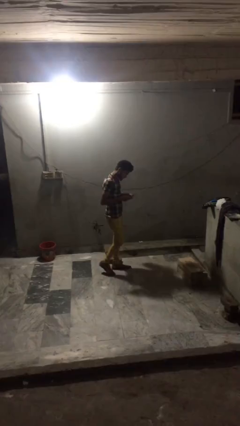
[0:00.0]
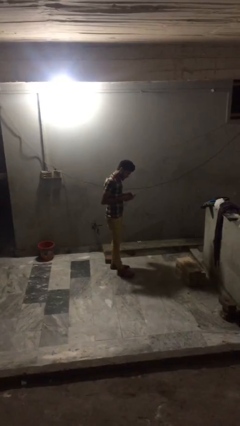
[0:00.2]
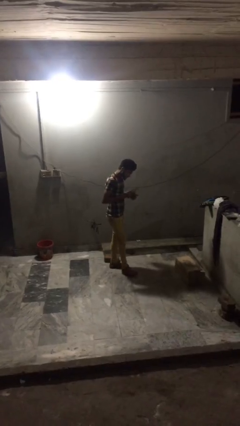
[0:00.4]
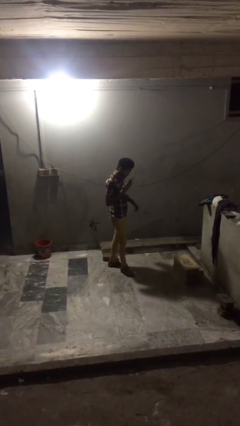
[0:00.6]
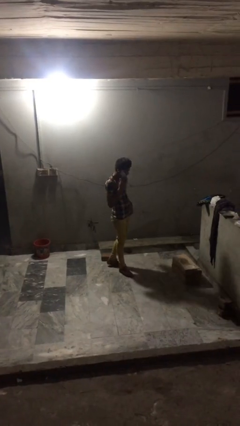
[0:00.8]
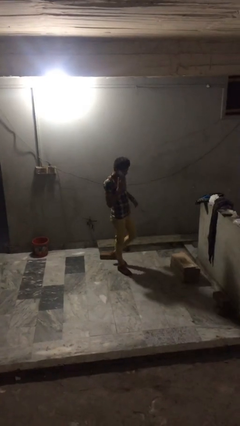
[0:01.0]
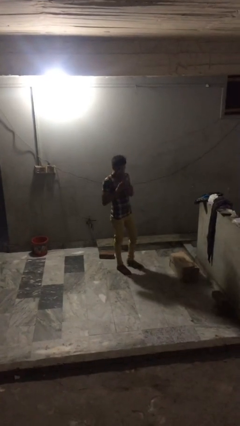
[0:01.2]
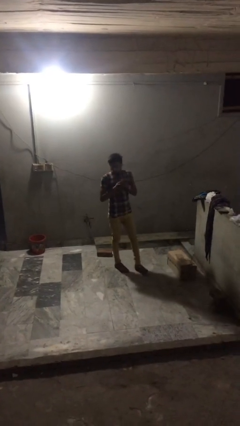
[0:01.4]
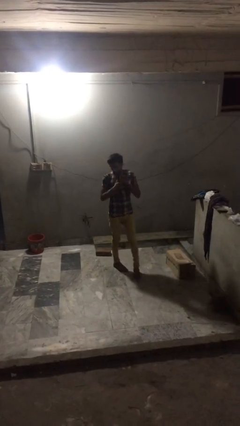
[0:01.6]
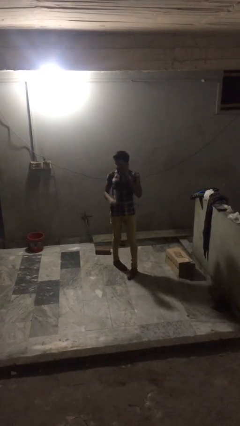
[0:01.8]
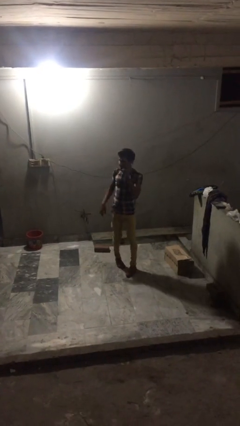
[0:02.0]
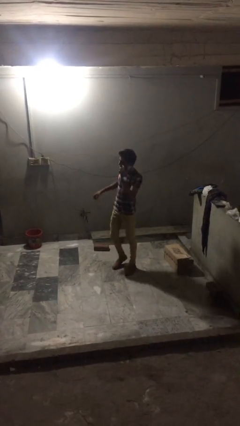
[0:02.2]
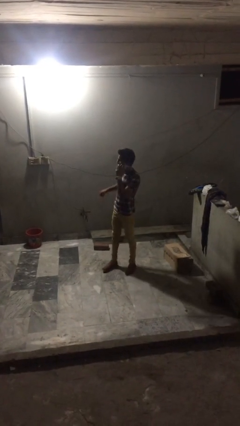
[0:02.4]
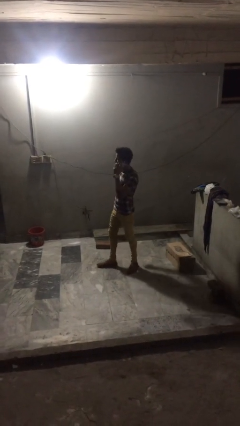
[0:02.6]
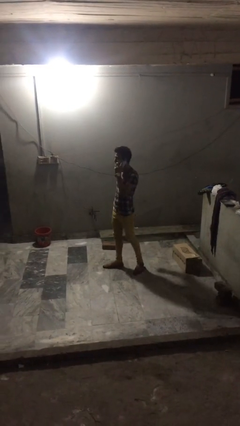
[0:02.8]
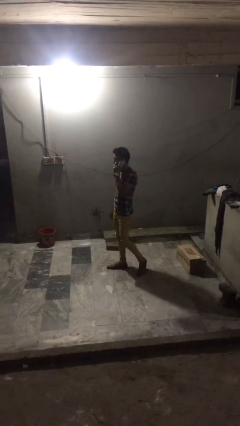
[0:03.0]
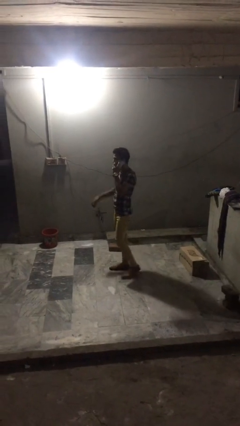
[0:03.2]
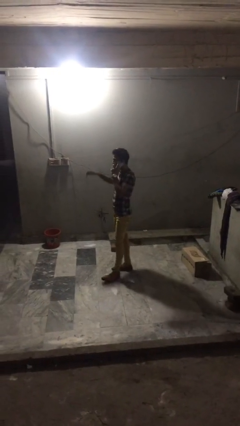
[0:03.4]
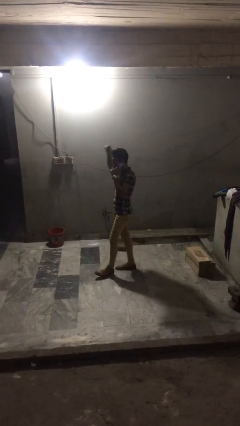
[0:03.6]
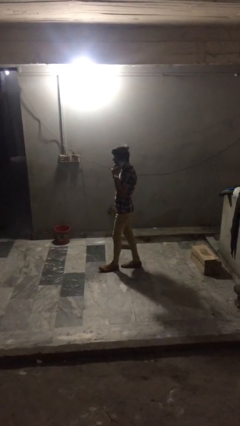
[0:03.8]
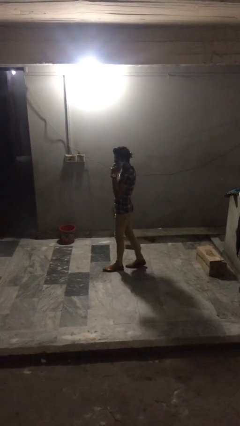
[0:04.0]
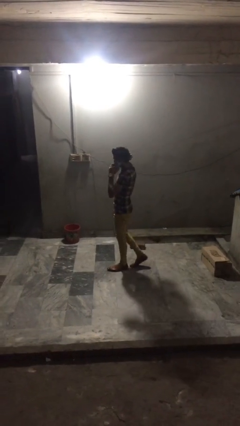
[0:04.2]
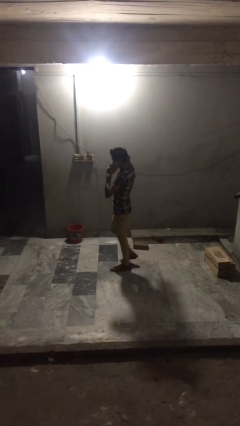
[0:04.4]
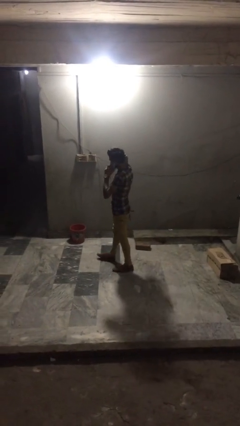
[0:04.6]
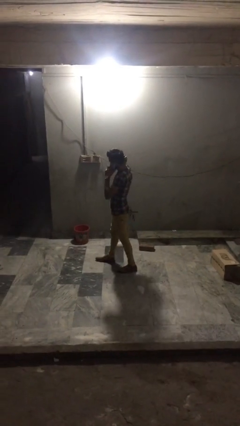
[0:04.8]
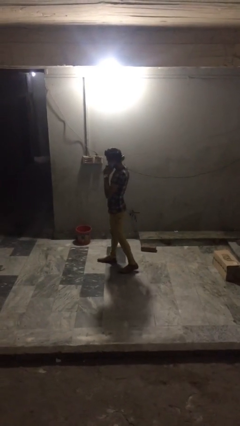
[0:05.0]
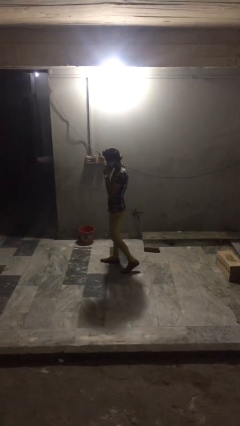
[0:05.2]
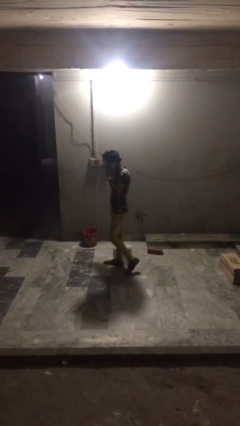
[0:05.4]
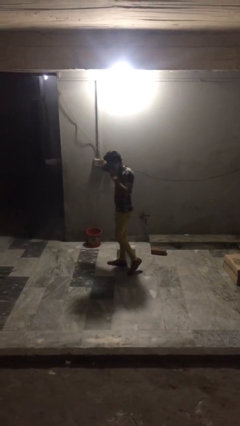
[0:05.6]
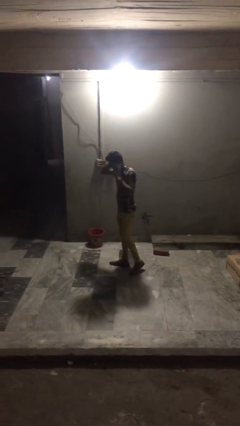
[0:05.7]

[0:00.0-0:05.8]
person talks on phone

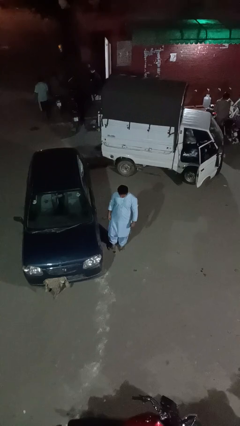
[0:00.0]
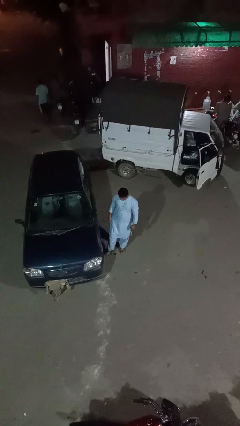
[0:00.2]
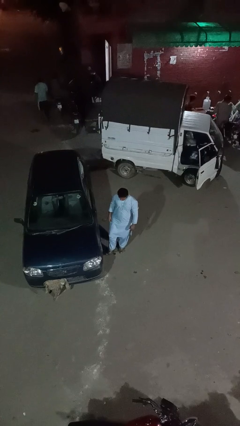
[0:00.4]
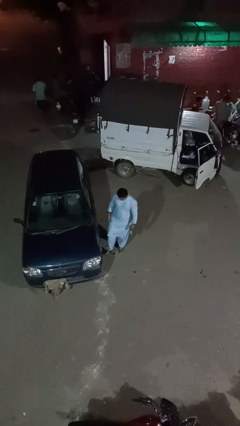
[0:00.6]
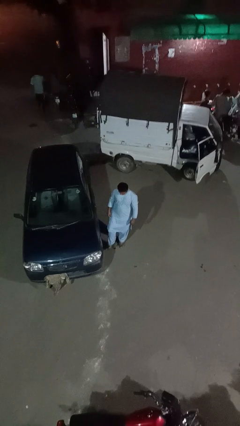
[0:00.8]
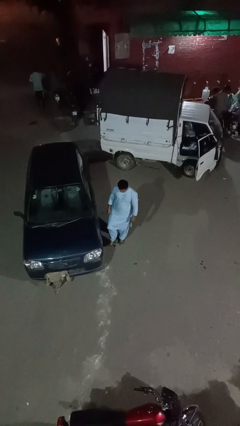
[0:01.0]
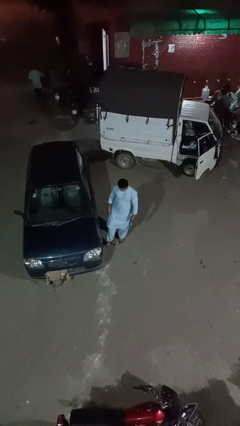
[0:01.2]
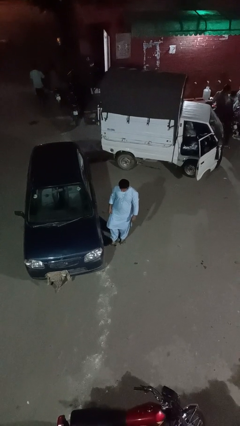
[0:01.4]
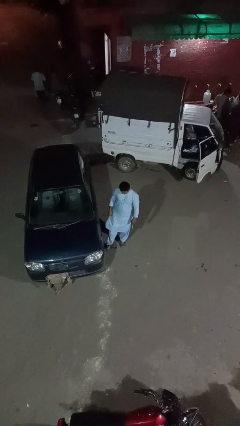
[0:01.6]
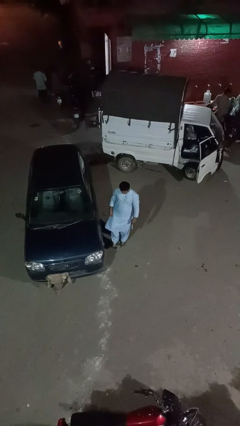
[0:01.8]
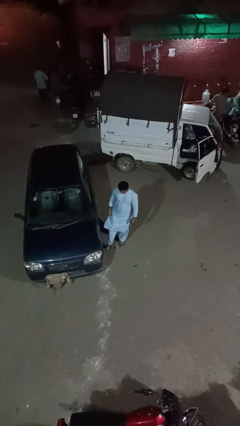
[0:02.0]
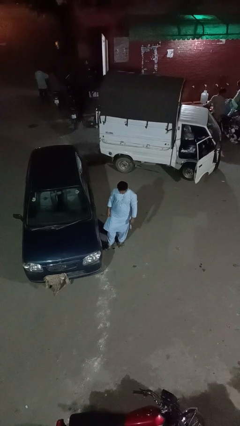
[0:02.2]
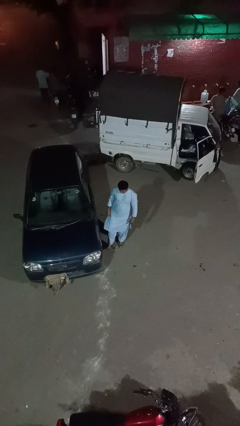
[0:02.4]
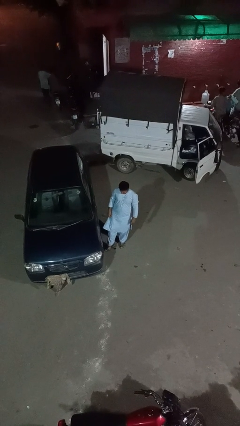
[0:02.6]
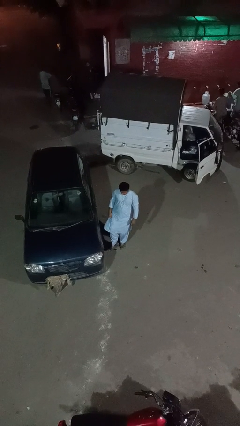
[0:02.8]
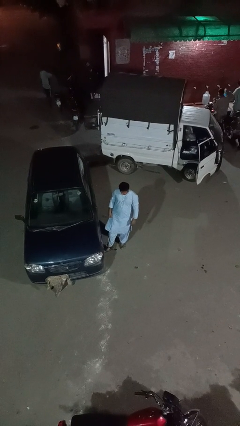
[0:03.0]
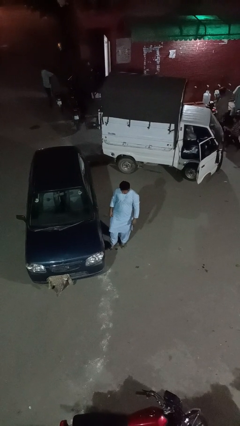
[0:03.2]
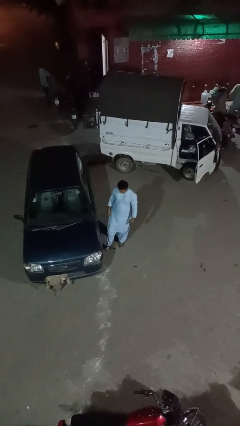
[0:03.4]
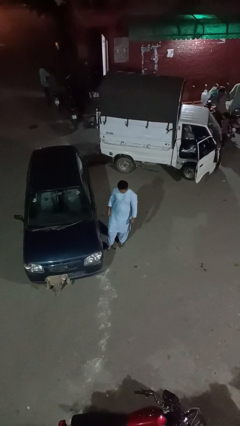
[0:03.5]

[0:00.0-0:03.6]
person kicks car tires

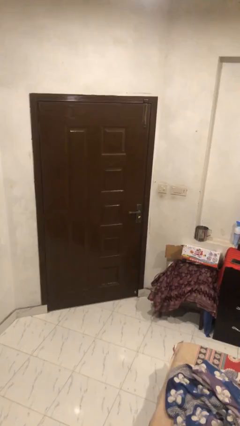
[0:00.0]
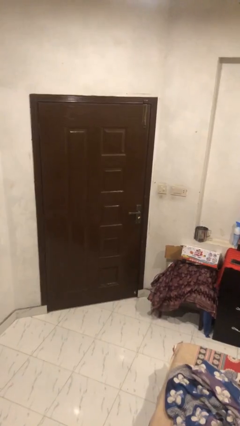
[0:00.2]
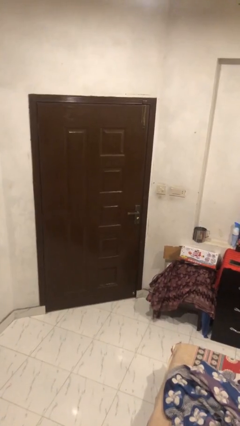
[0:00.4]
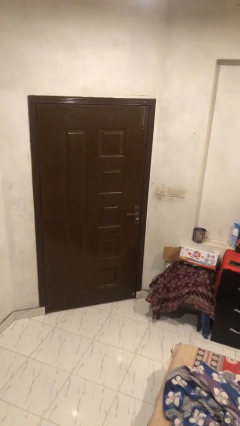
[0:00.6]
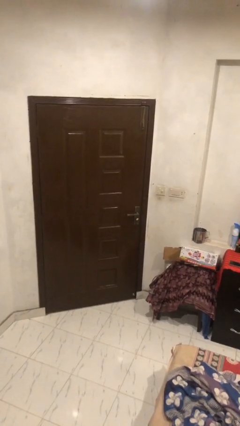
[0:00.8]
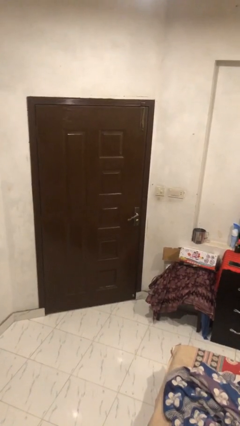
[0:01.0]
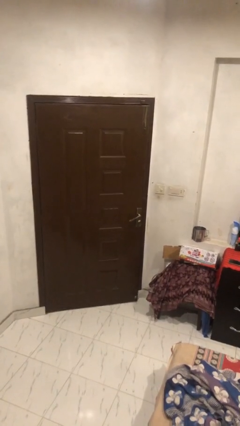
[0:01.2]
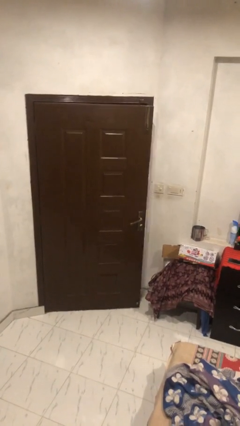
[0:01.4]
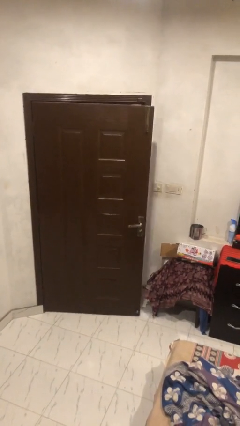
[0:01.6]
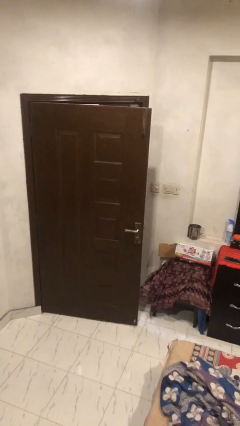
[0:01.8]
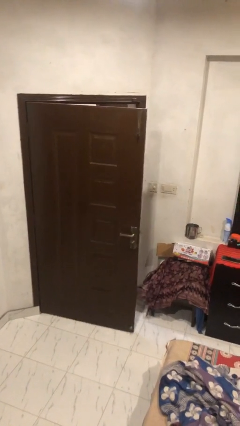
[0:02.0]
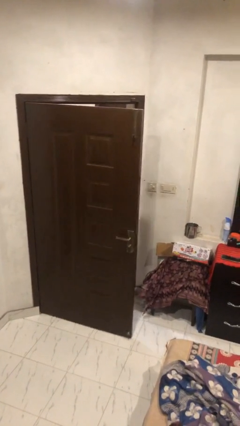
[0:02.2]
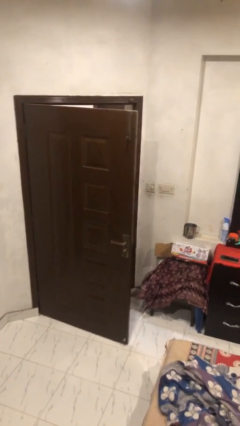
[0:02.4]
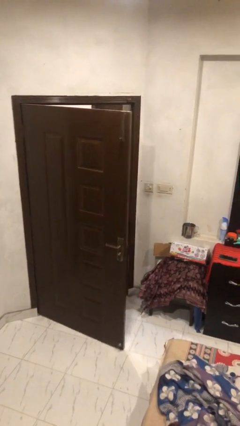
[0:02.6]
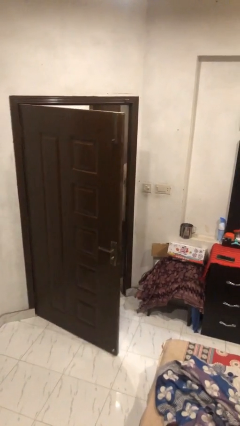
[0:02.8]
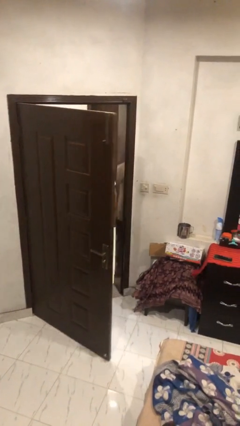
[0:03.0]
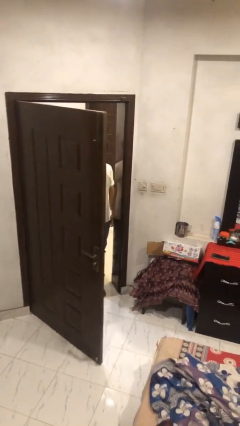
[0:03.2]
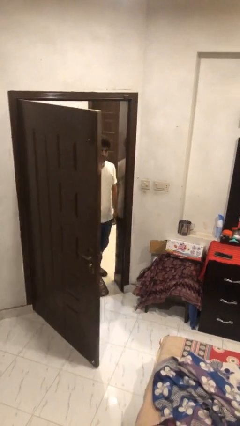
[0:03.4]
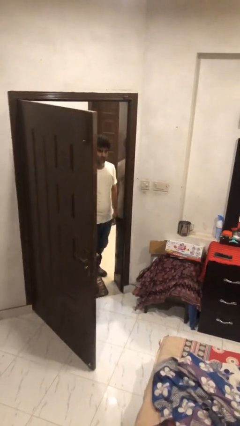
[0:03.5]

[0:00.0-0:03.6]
person opens facility door

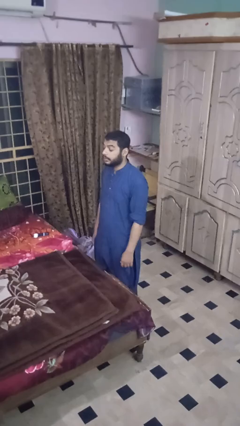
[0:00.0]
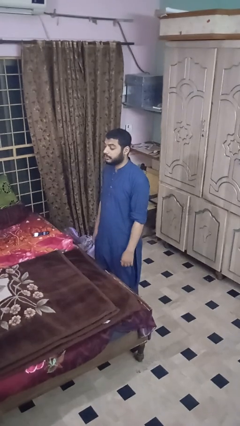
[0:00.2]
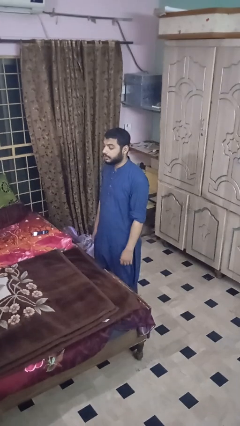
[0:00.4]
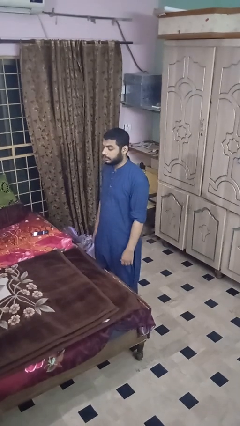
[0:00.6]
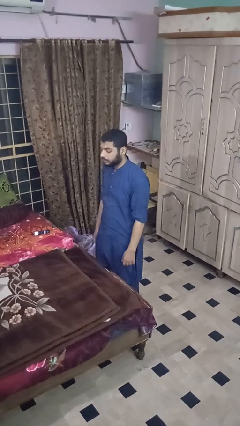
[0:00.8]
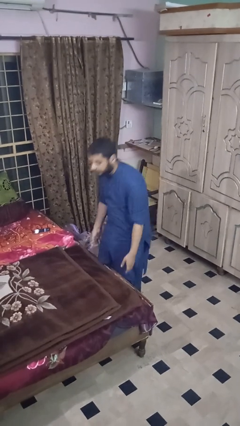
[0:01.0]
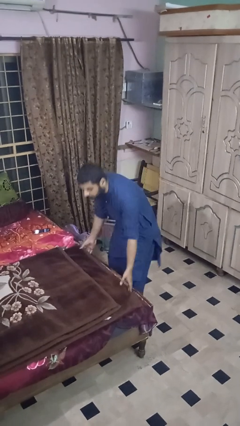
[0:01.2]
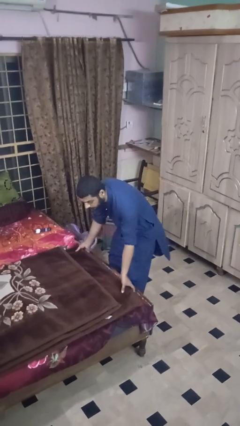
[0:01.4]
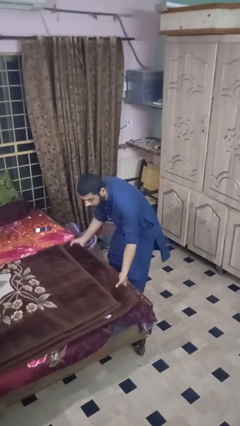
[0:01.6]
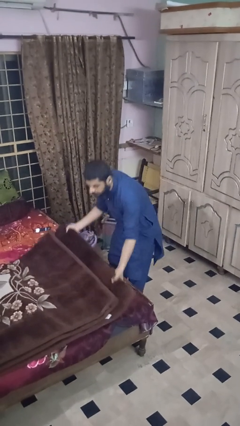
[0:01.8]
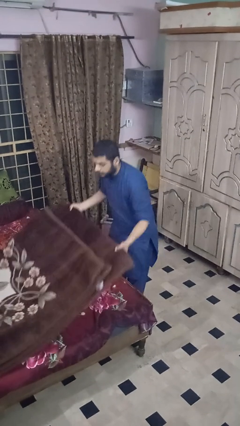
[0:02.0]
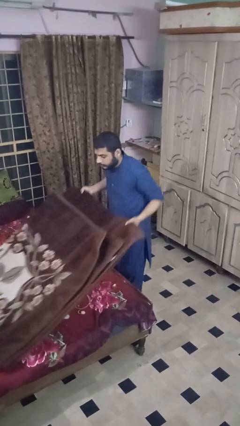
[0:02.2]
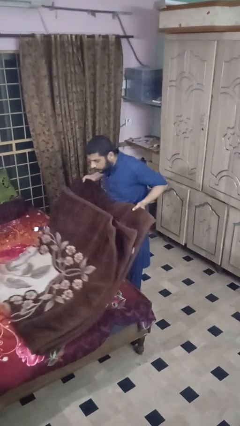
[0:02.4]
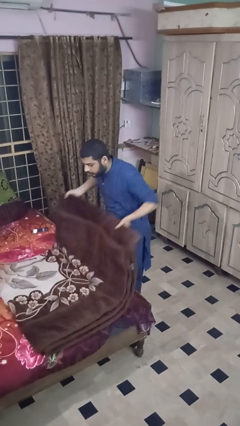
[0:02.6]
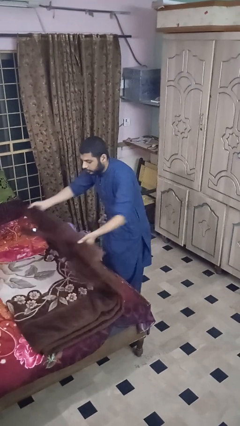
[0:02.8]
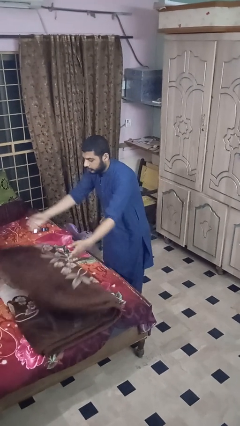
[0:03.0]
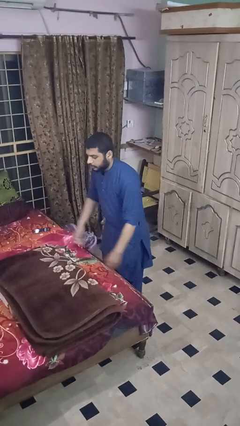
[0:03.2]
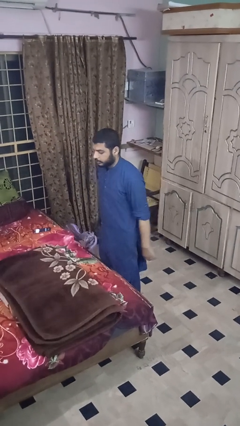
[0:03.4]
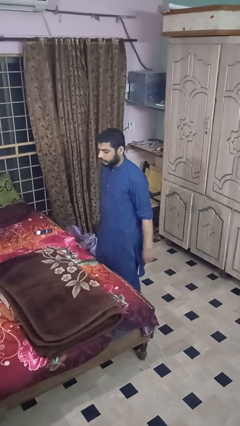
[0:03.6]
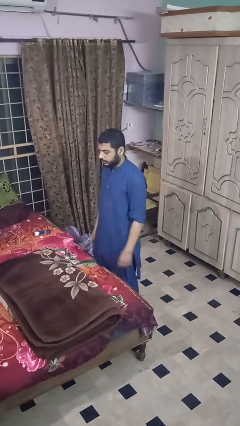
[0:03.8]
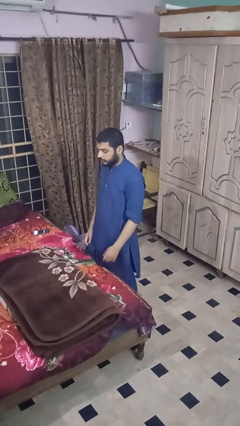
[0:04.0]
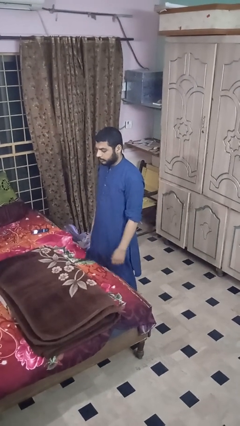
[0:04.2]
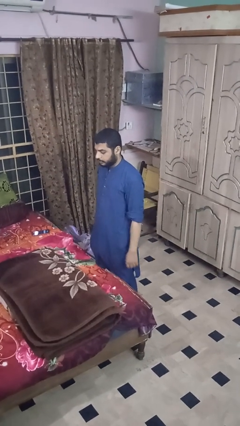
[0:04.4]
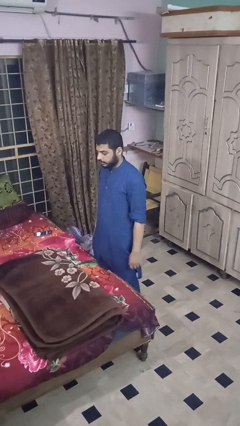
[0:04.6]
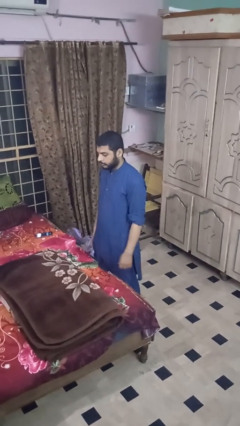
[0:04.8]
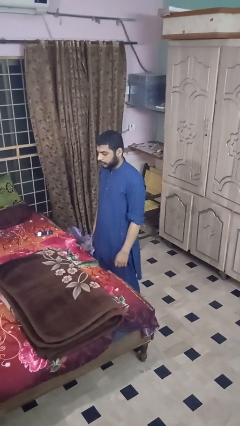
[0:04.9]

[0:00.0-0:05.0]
person folds blanket
